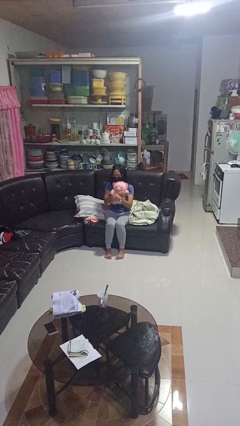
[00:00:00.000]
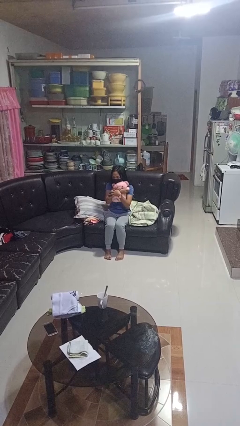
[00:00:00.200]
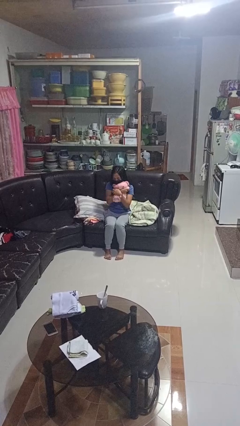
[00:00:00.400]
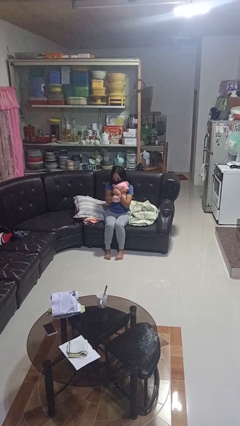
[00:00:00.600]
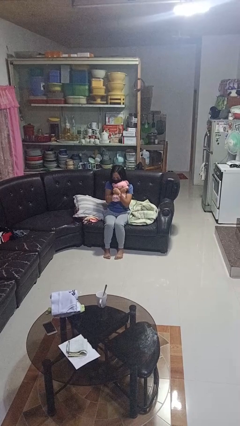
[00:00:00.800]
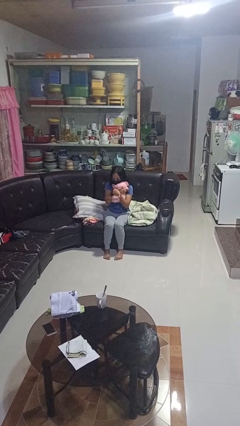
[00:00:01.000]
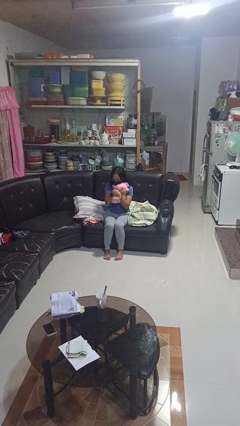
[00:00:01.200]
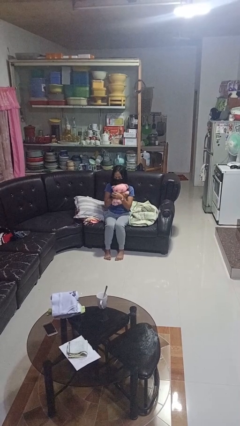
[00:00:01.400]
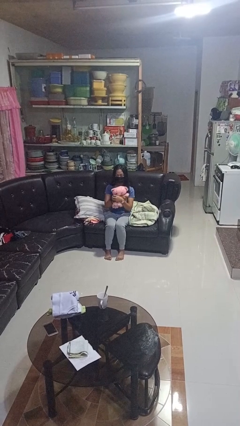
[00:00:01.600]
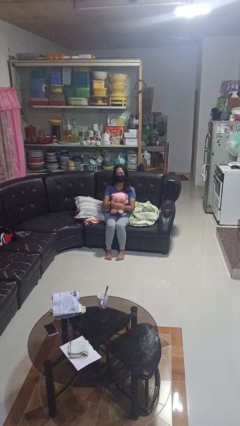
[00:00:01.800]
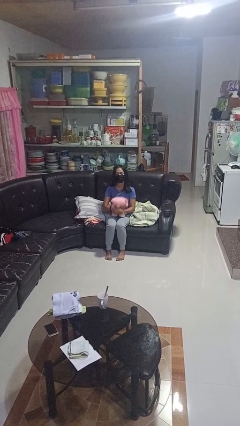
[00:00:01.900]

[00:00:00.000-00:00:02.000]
person hugs stuffed animal

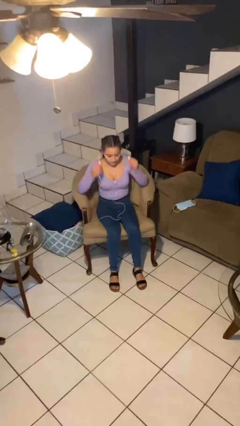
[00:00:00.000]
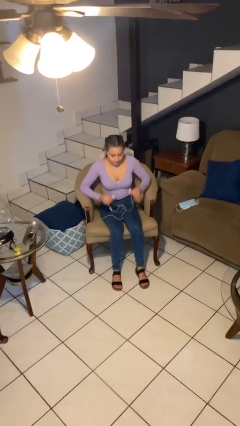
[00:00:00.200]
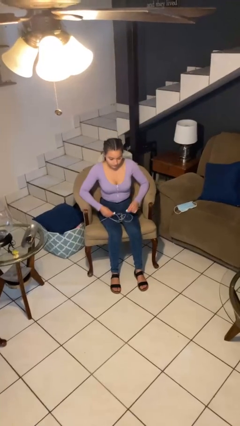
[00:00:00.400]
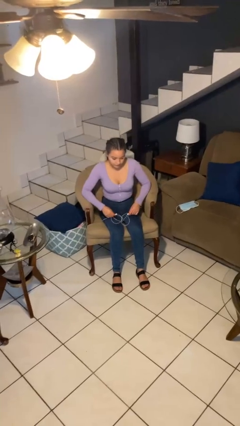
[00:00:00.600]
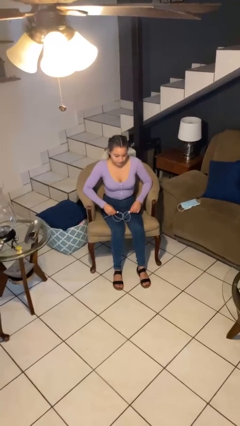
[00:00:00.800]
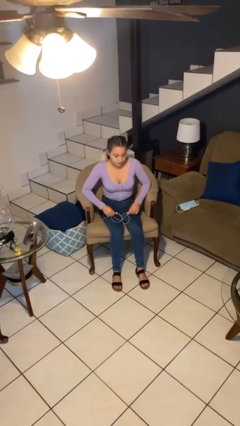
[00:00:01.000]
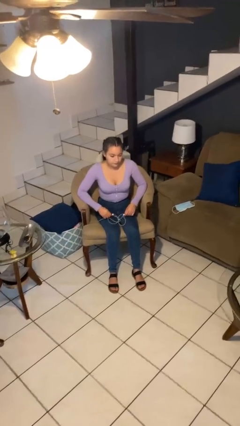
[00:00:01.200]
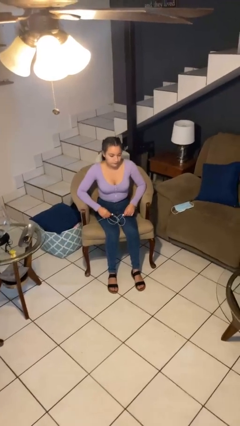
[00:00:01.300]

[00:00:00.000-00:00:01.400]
person takes off headphones

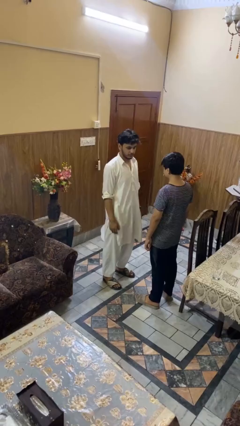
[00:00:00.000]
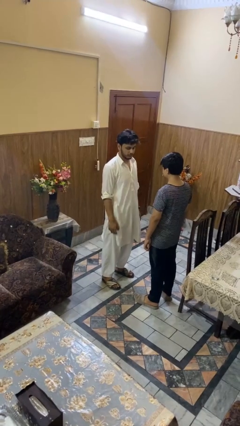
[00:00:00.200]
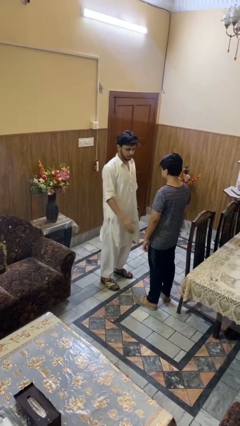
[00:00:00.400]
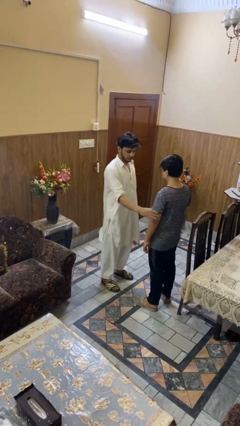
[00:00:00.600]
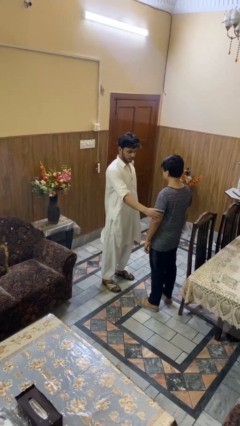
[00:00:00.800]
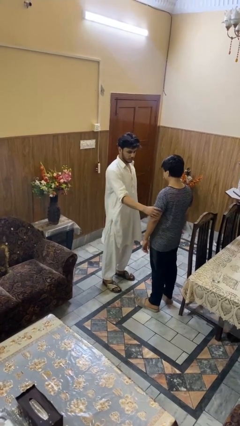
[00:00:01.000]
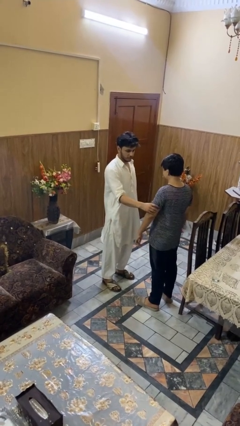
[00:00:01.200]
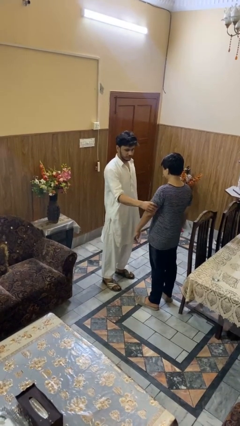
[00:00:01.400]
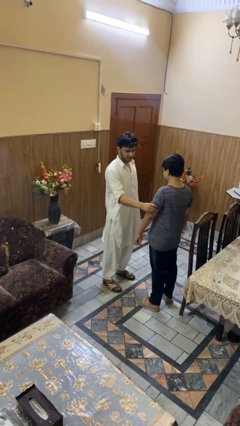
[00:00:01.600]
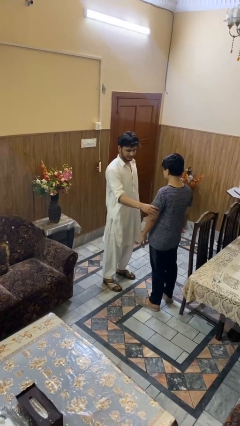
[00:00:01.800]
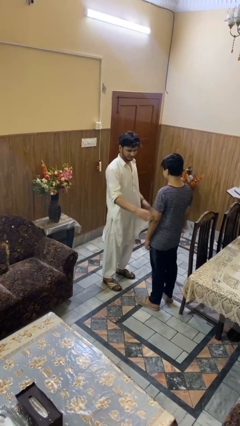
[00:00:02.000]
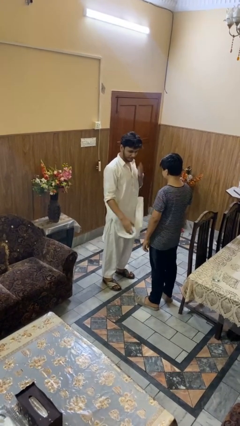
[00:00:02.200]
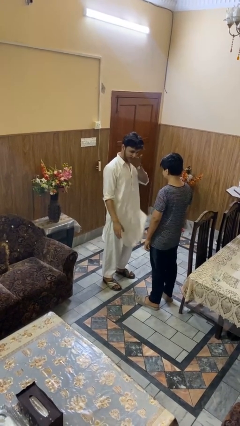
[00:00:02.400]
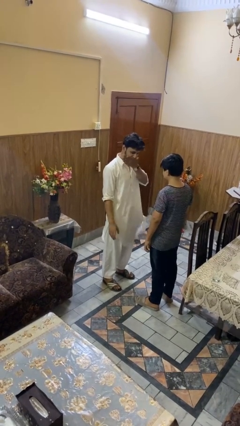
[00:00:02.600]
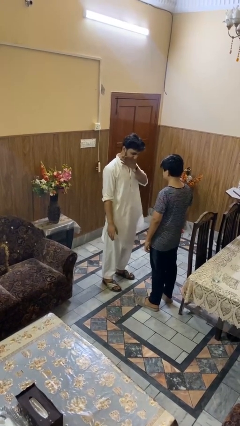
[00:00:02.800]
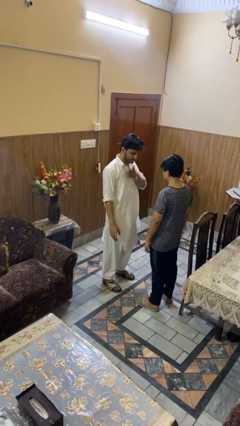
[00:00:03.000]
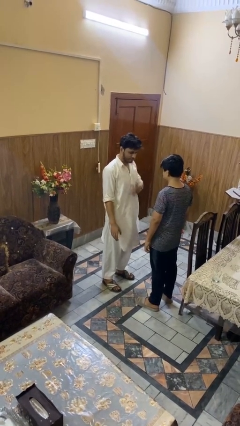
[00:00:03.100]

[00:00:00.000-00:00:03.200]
person grabs person by bicep

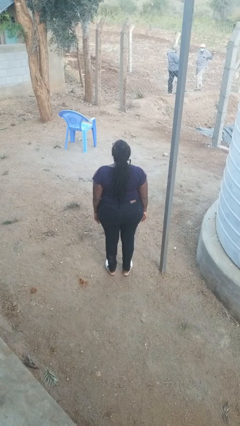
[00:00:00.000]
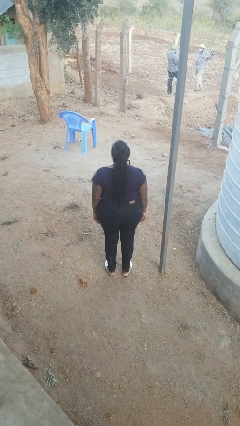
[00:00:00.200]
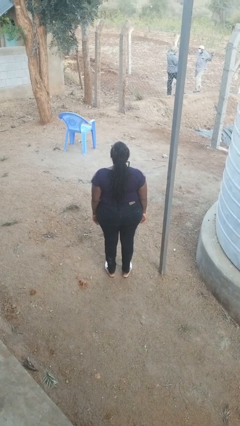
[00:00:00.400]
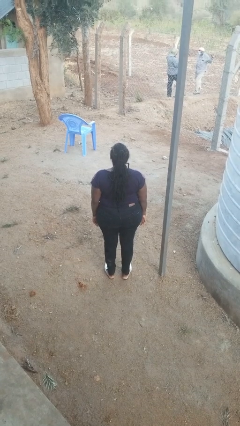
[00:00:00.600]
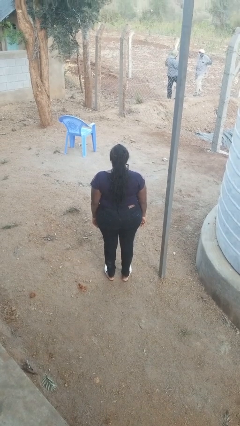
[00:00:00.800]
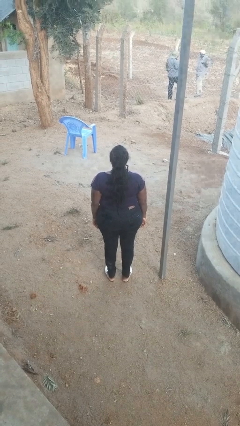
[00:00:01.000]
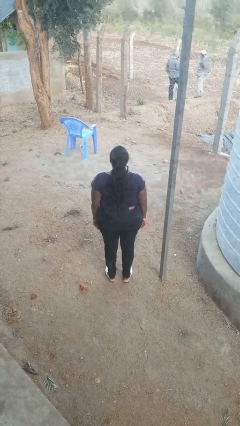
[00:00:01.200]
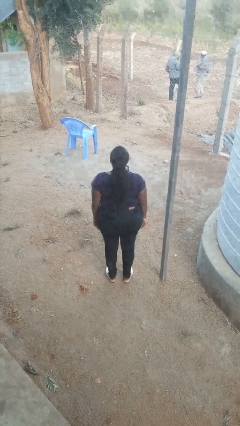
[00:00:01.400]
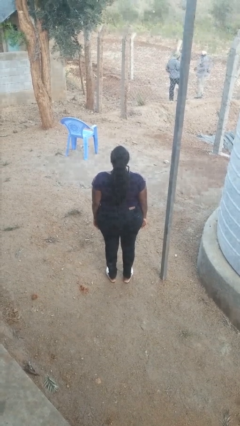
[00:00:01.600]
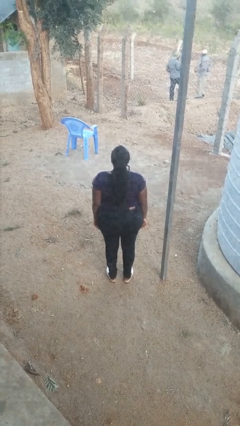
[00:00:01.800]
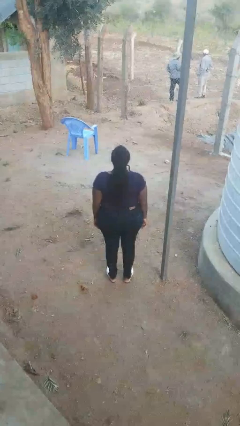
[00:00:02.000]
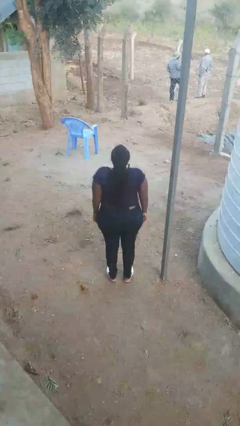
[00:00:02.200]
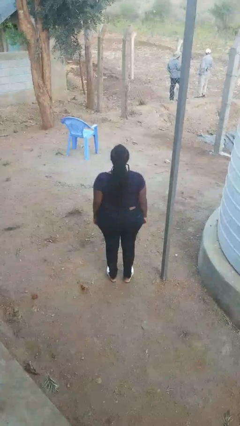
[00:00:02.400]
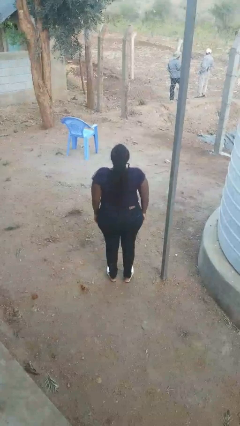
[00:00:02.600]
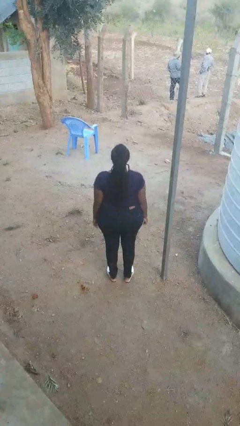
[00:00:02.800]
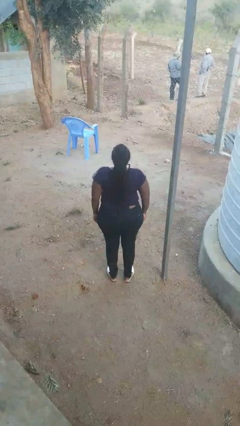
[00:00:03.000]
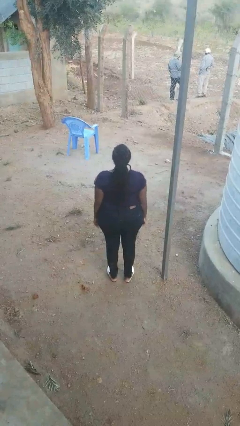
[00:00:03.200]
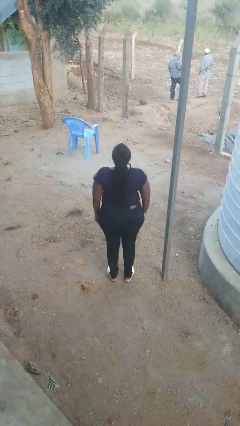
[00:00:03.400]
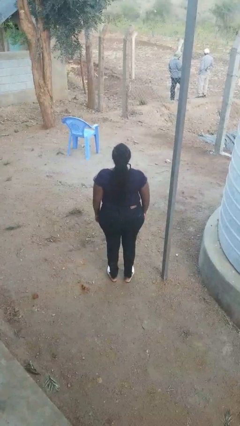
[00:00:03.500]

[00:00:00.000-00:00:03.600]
person shrugs

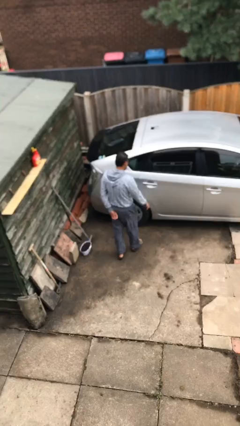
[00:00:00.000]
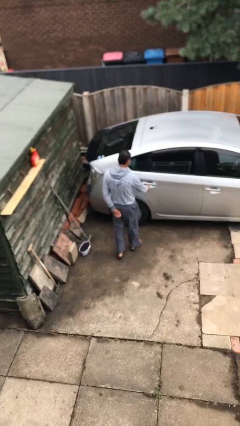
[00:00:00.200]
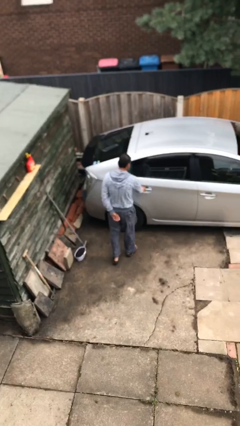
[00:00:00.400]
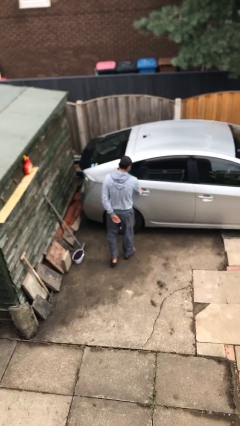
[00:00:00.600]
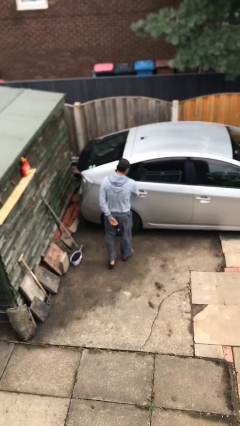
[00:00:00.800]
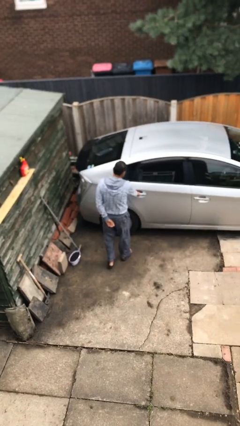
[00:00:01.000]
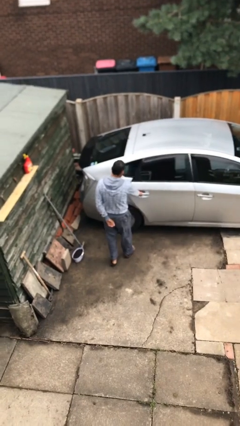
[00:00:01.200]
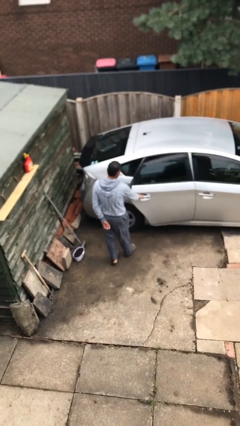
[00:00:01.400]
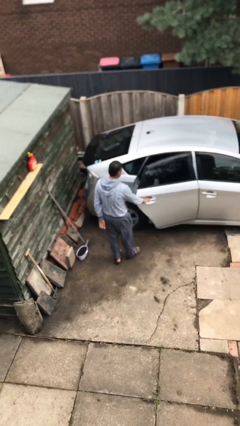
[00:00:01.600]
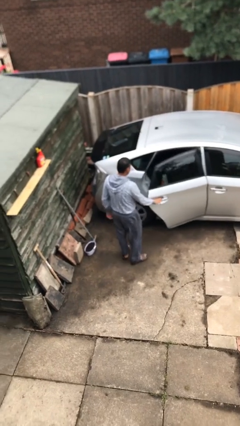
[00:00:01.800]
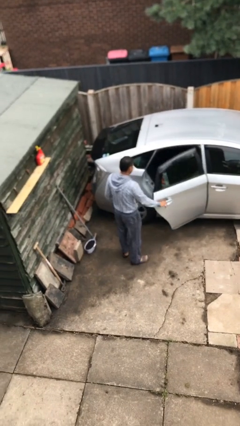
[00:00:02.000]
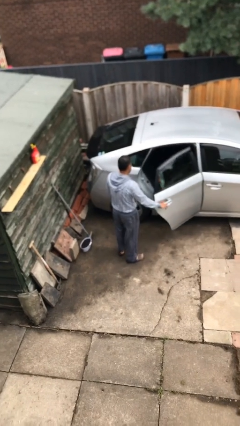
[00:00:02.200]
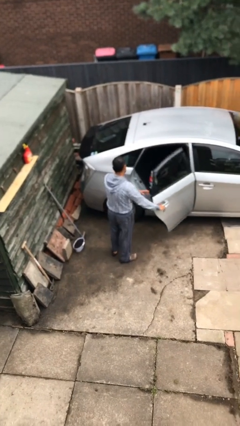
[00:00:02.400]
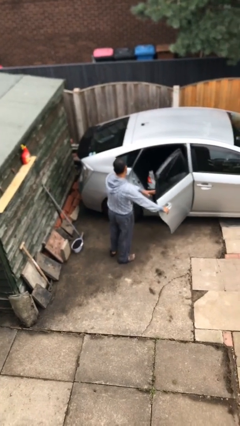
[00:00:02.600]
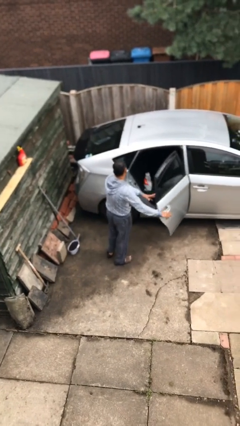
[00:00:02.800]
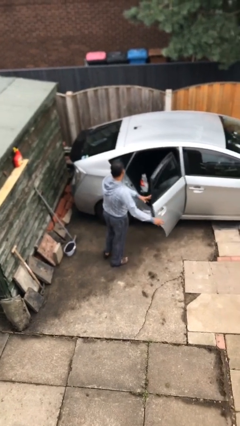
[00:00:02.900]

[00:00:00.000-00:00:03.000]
person opens car door

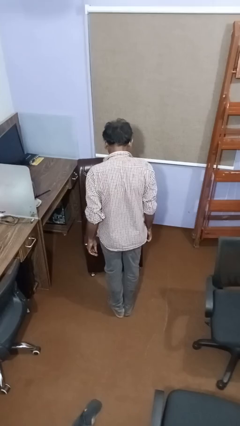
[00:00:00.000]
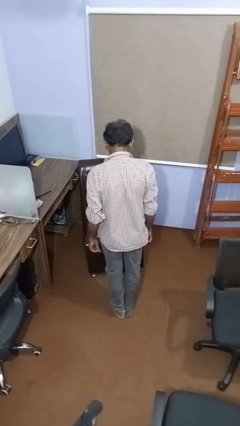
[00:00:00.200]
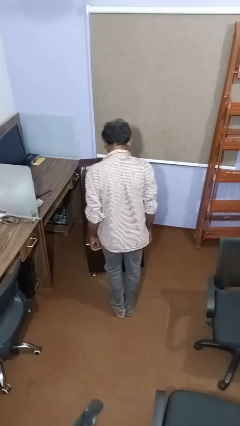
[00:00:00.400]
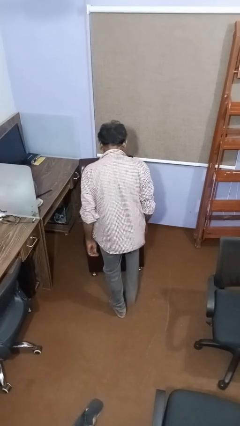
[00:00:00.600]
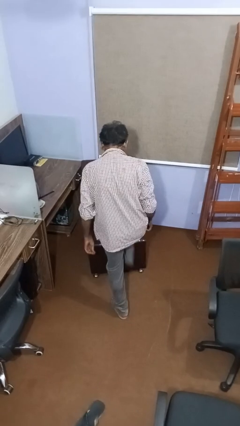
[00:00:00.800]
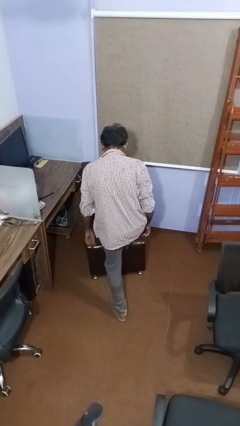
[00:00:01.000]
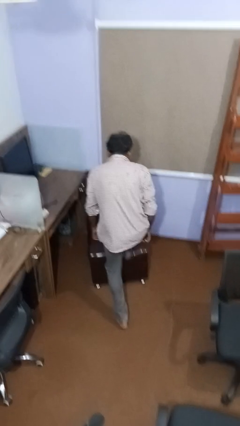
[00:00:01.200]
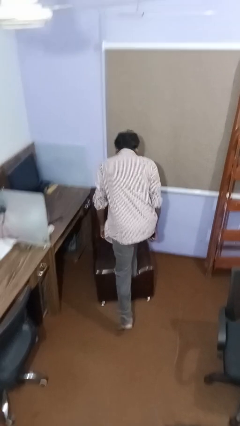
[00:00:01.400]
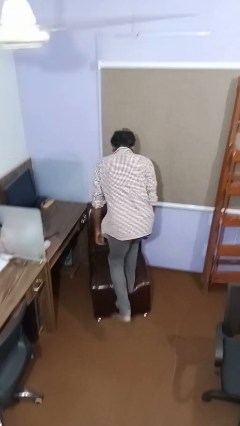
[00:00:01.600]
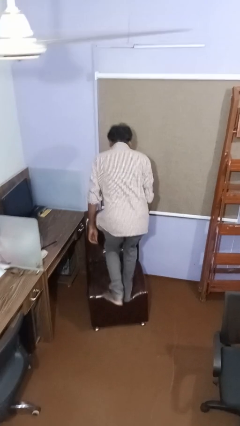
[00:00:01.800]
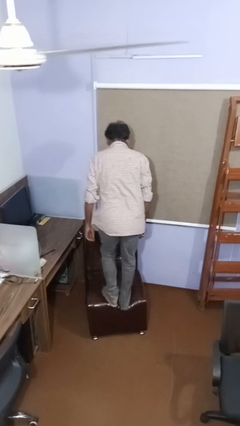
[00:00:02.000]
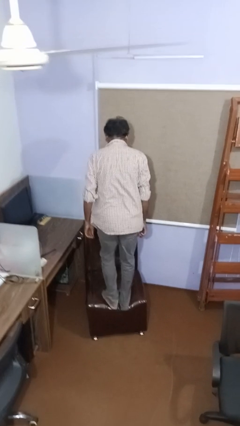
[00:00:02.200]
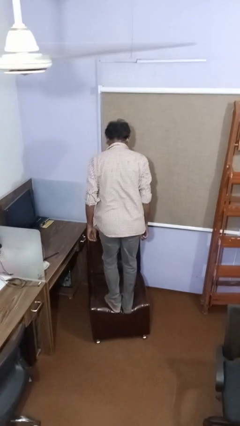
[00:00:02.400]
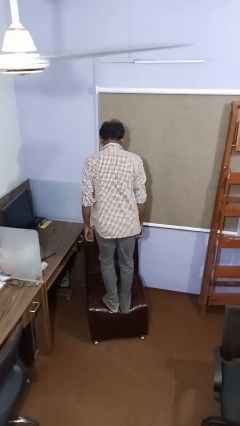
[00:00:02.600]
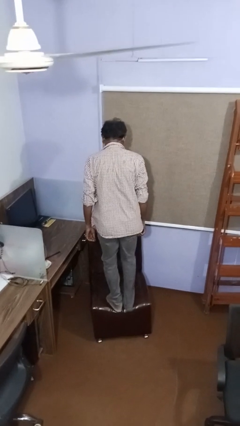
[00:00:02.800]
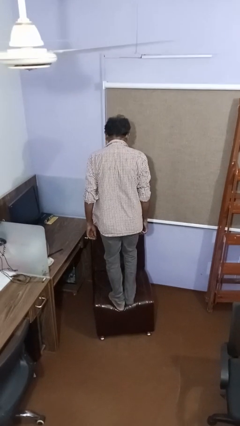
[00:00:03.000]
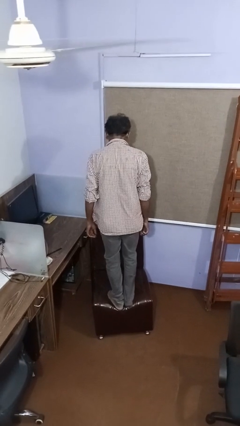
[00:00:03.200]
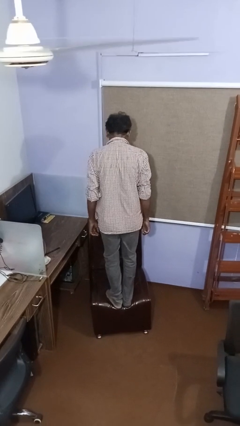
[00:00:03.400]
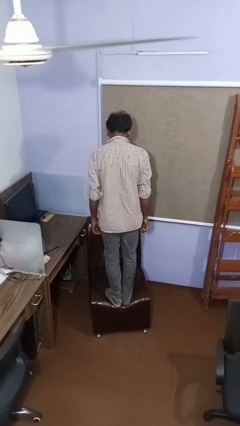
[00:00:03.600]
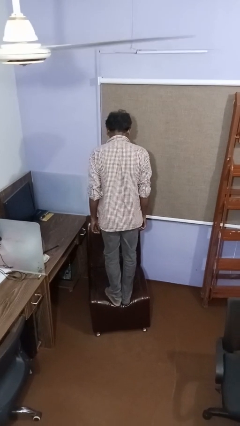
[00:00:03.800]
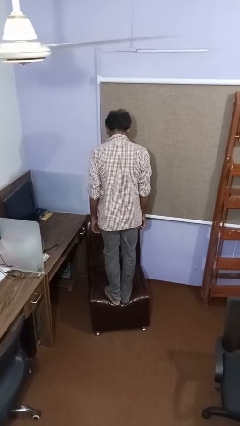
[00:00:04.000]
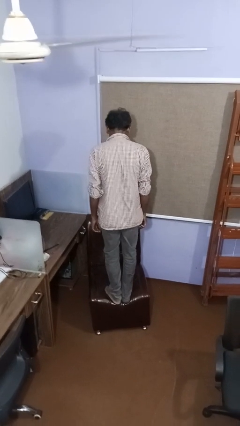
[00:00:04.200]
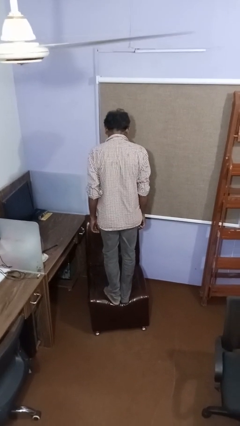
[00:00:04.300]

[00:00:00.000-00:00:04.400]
person climbs on couch
